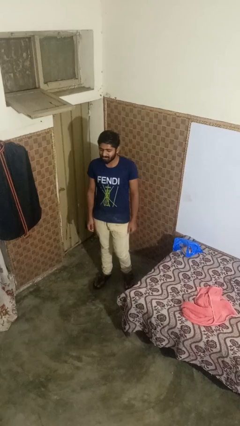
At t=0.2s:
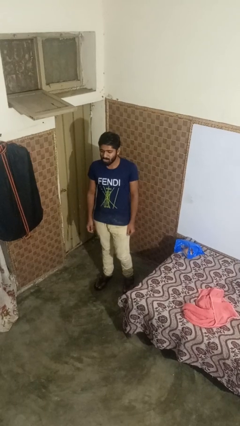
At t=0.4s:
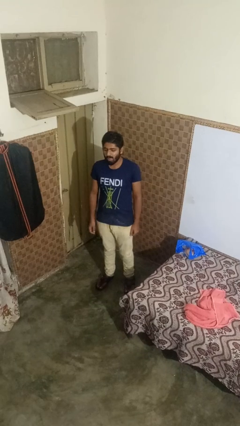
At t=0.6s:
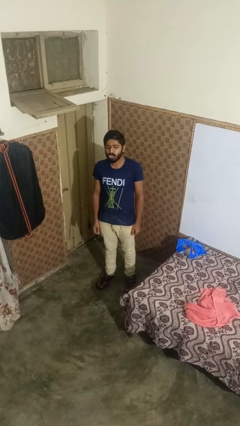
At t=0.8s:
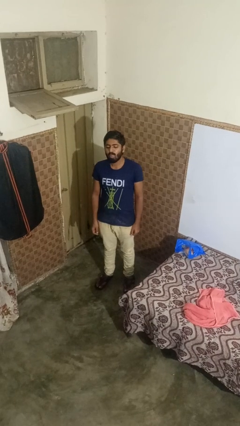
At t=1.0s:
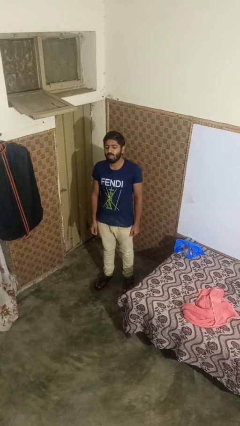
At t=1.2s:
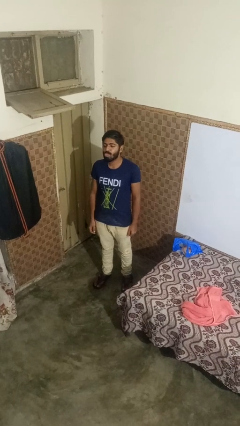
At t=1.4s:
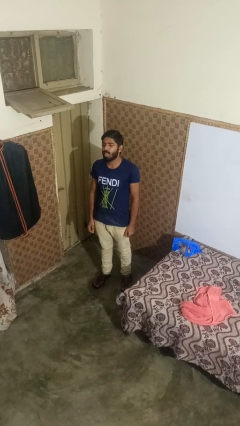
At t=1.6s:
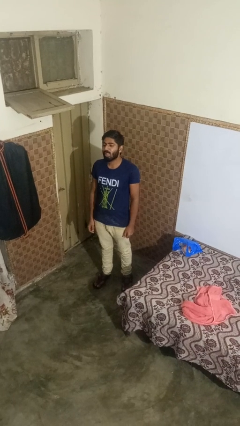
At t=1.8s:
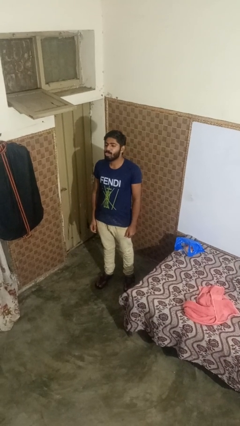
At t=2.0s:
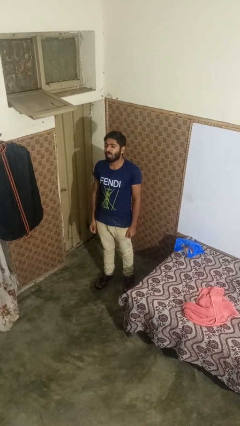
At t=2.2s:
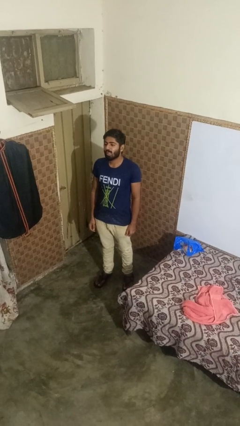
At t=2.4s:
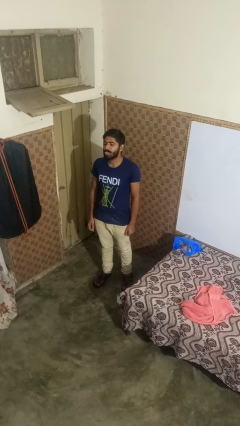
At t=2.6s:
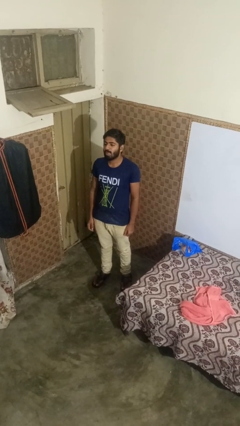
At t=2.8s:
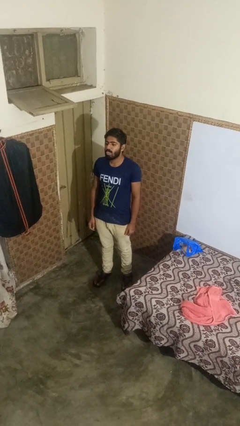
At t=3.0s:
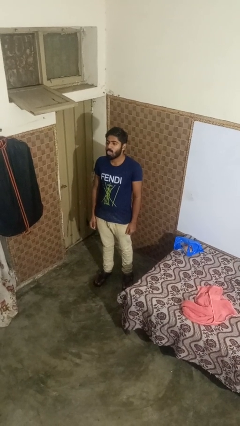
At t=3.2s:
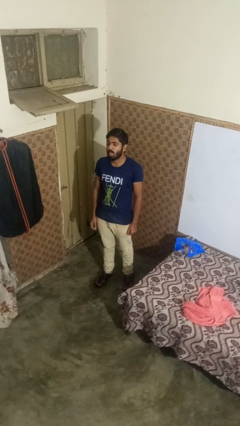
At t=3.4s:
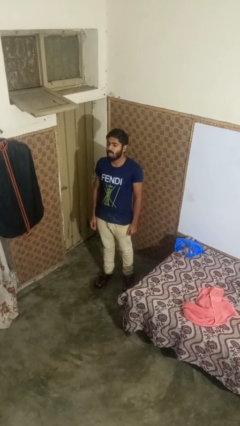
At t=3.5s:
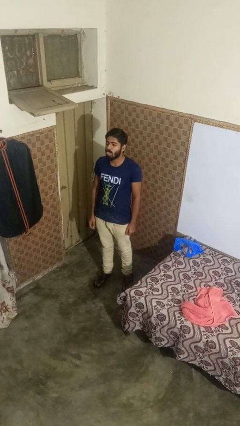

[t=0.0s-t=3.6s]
person sticks out tongue

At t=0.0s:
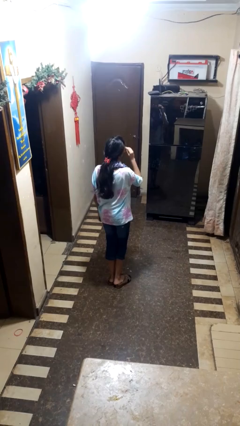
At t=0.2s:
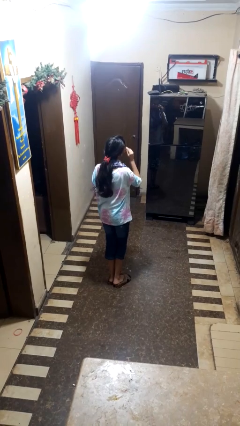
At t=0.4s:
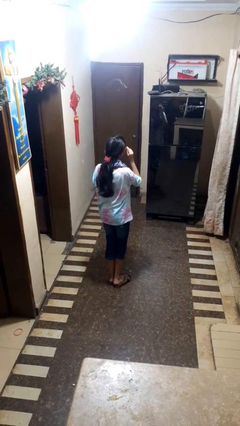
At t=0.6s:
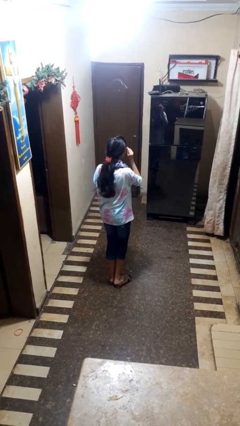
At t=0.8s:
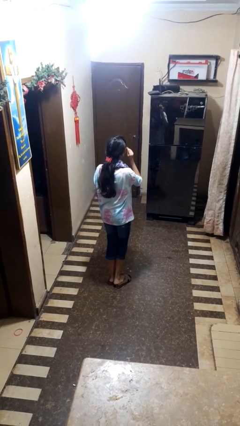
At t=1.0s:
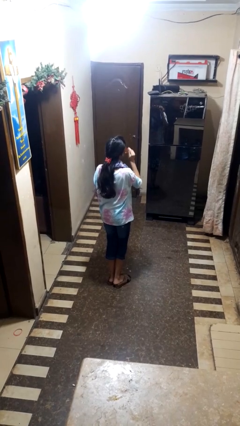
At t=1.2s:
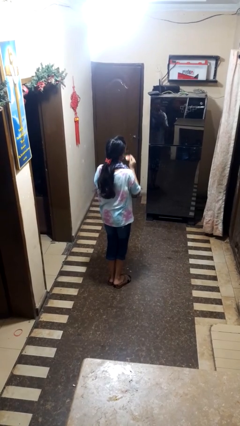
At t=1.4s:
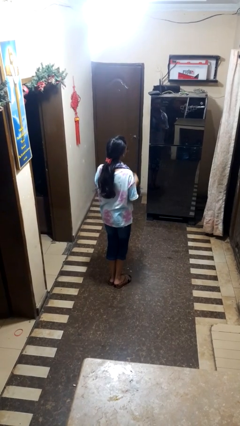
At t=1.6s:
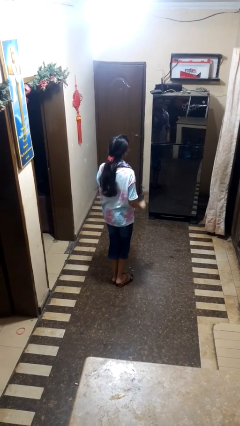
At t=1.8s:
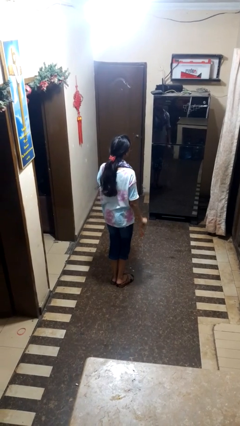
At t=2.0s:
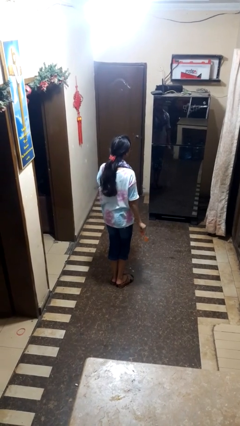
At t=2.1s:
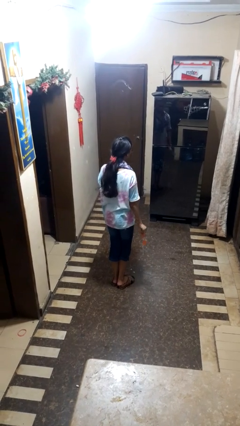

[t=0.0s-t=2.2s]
person takes off sunglasses

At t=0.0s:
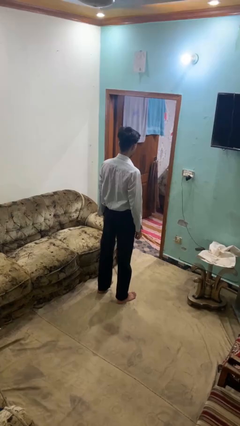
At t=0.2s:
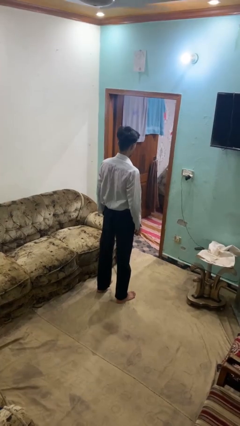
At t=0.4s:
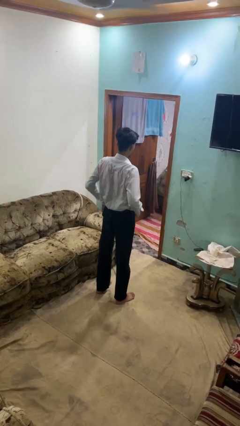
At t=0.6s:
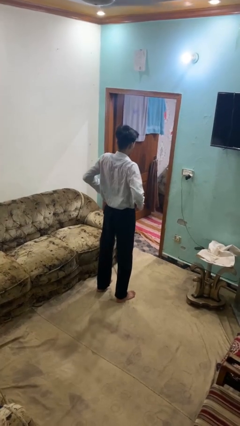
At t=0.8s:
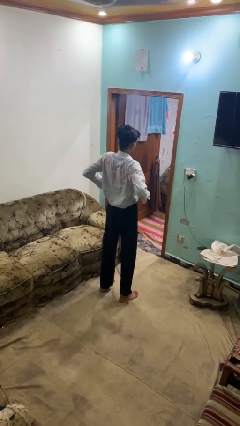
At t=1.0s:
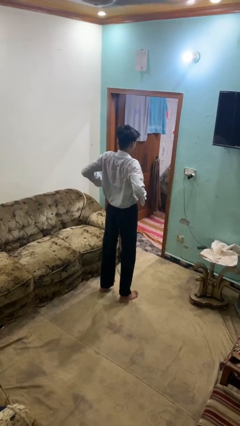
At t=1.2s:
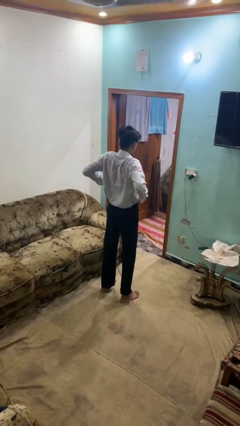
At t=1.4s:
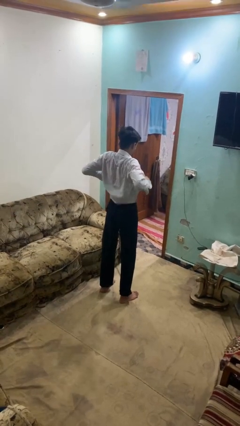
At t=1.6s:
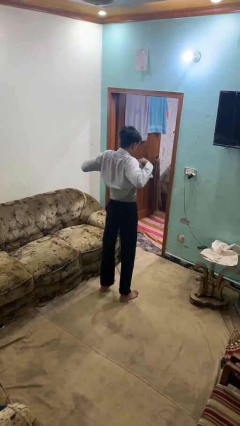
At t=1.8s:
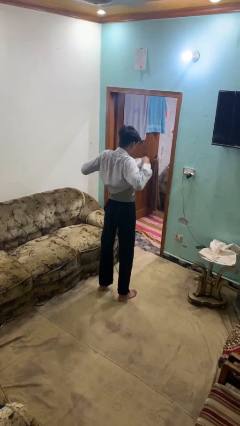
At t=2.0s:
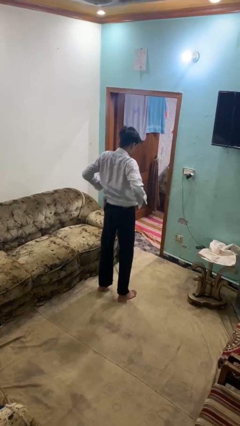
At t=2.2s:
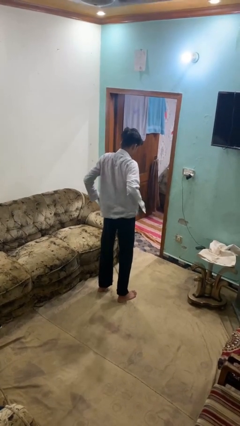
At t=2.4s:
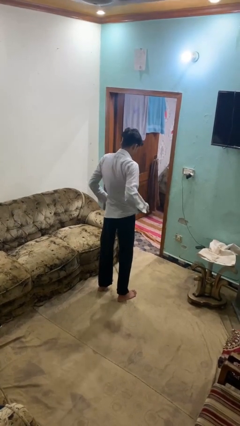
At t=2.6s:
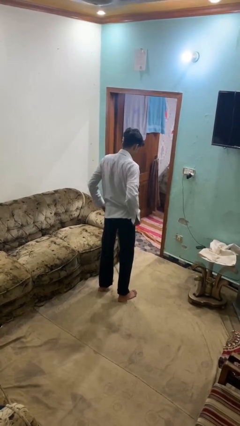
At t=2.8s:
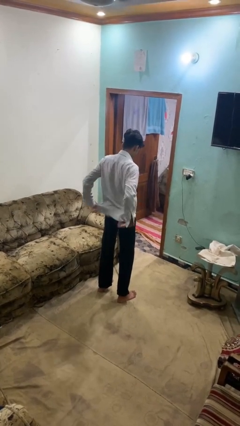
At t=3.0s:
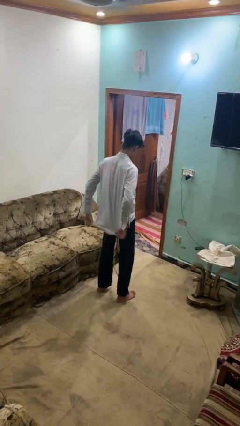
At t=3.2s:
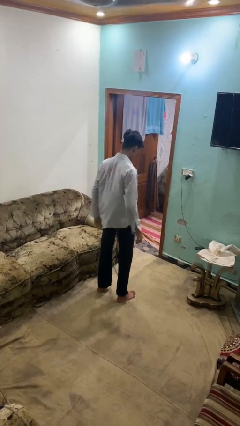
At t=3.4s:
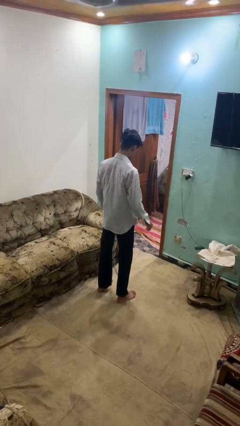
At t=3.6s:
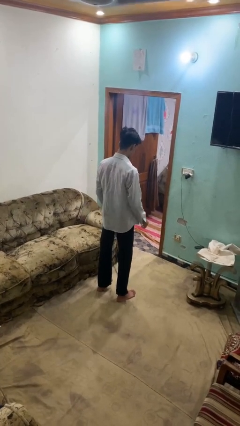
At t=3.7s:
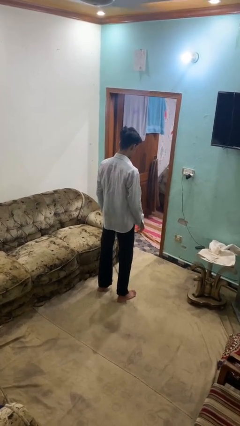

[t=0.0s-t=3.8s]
person untucks shirt

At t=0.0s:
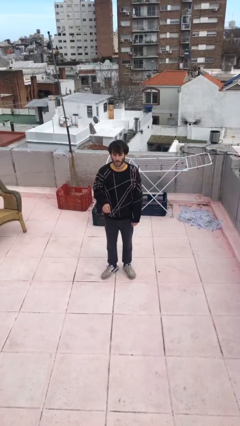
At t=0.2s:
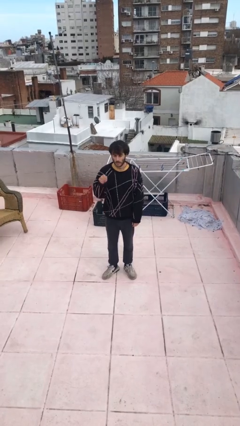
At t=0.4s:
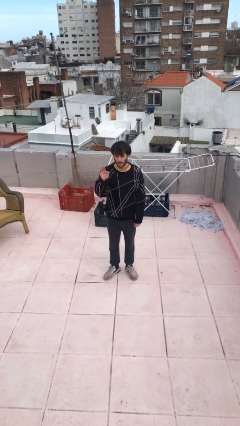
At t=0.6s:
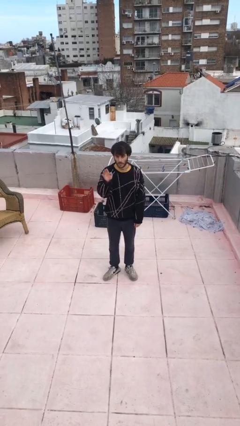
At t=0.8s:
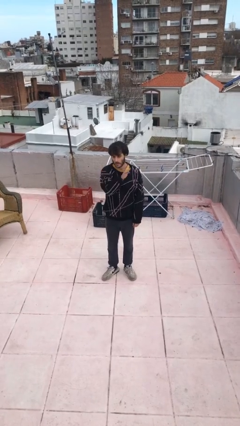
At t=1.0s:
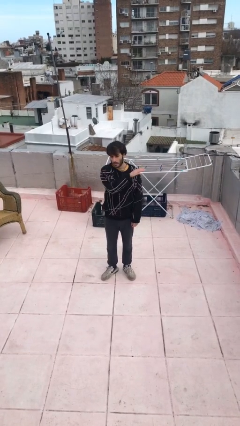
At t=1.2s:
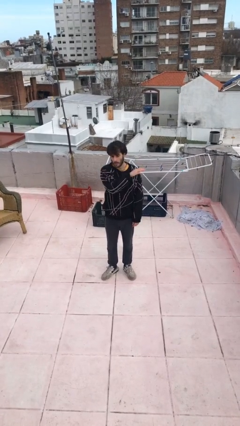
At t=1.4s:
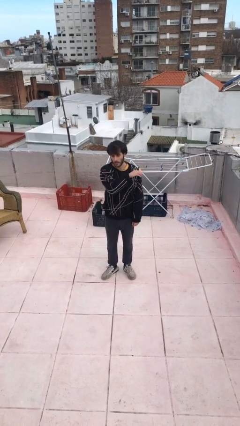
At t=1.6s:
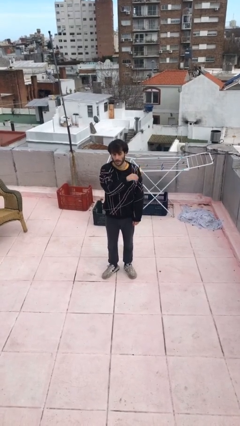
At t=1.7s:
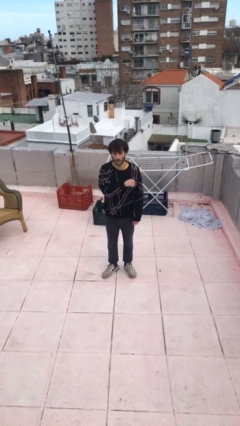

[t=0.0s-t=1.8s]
person gestures swipe left

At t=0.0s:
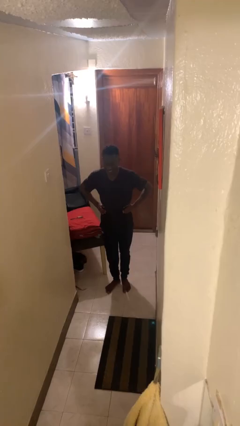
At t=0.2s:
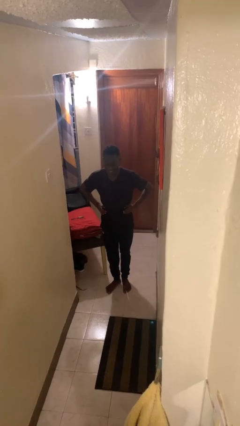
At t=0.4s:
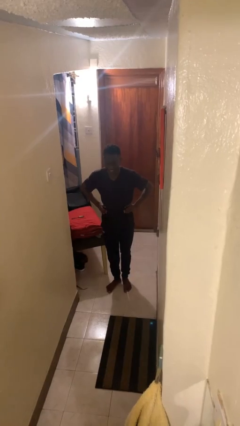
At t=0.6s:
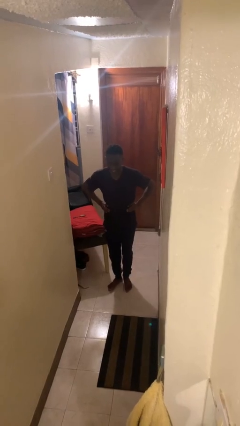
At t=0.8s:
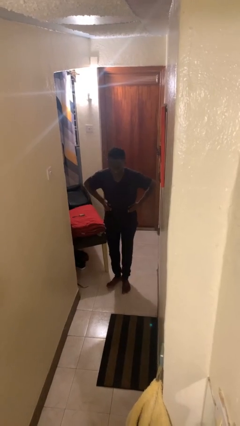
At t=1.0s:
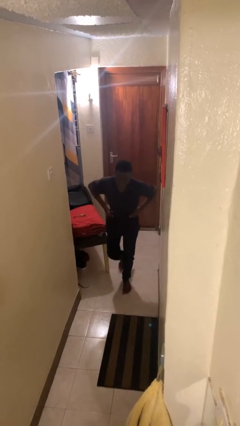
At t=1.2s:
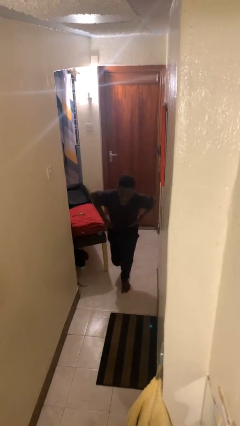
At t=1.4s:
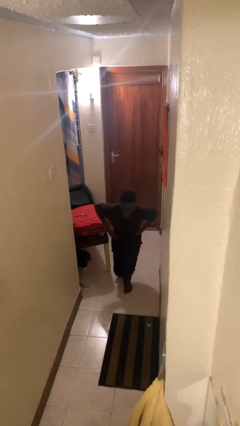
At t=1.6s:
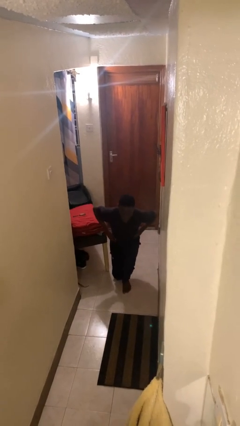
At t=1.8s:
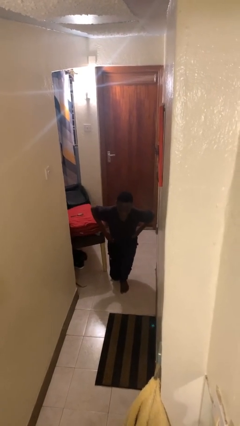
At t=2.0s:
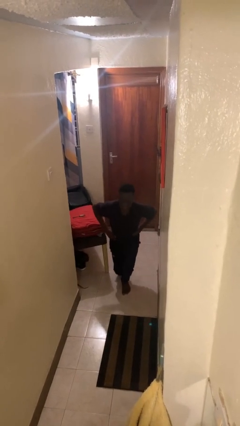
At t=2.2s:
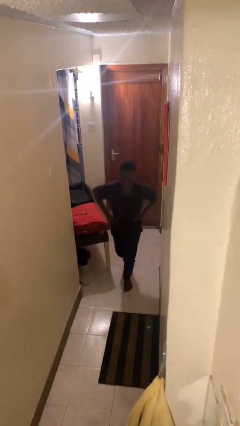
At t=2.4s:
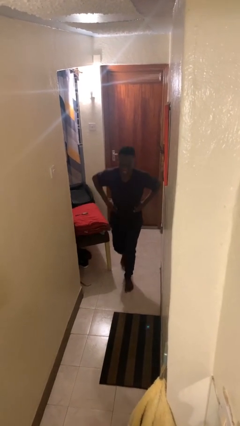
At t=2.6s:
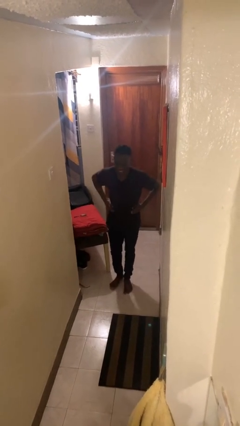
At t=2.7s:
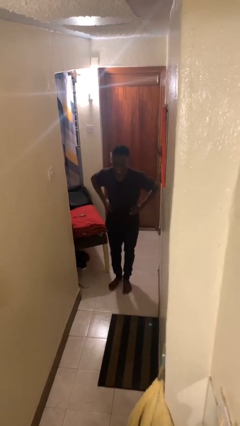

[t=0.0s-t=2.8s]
person exercises with lunges

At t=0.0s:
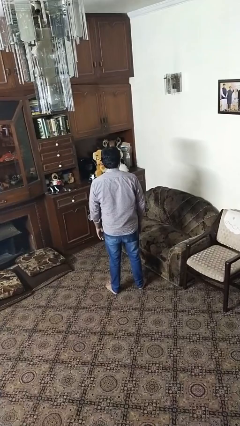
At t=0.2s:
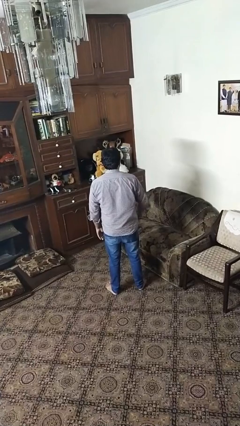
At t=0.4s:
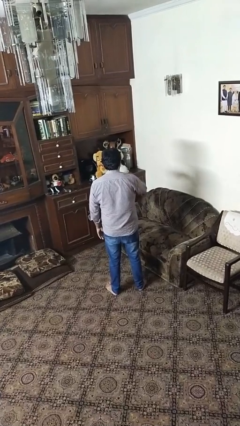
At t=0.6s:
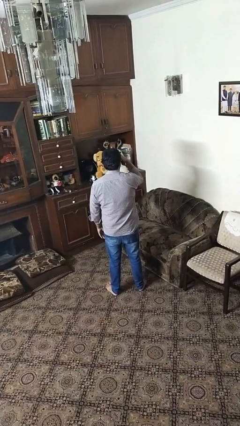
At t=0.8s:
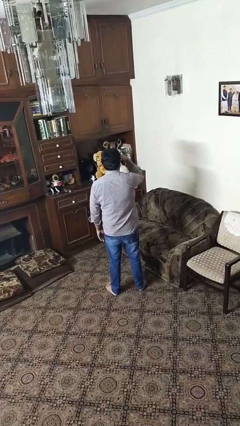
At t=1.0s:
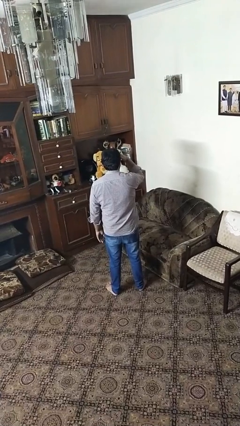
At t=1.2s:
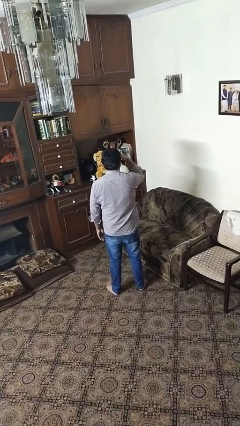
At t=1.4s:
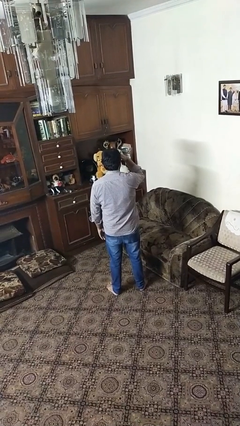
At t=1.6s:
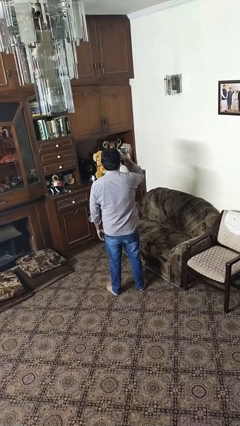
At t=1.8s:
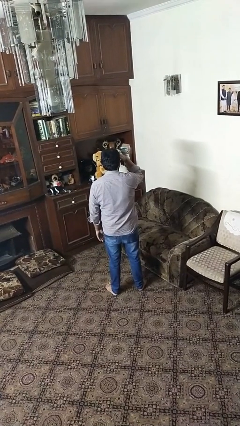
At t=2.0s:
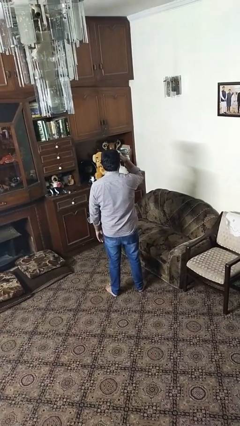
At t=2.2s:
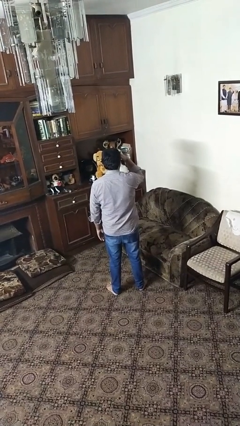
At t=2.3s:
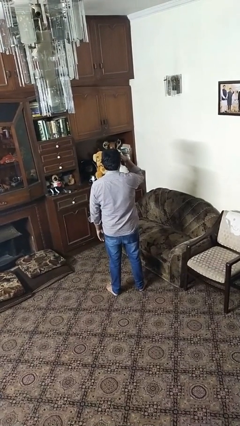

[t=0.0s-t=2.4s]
person salutes

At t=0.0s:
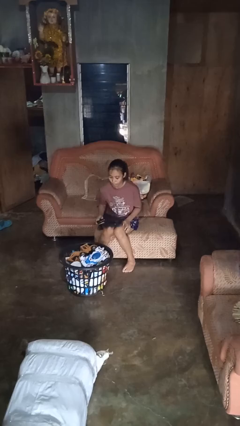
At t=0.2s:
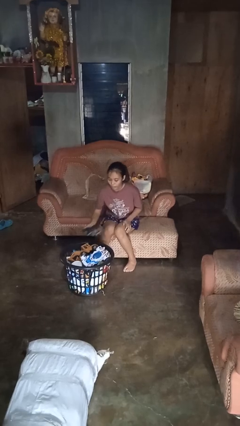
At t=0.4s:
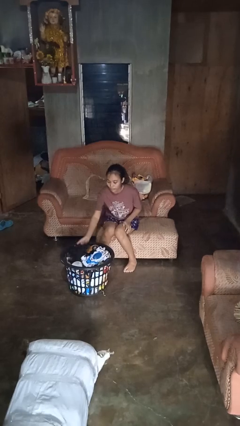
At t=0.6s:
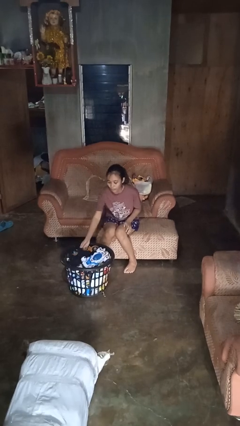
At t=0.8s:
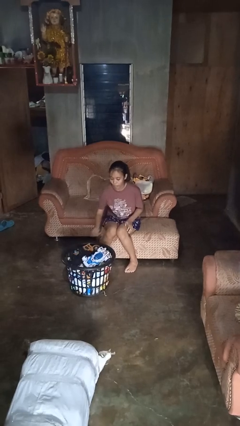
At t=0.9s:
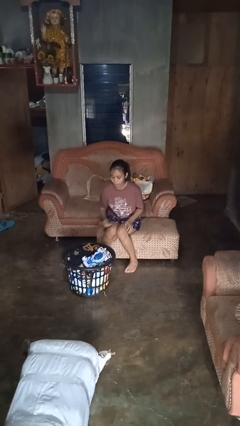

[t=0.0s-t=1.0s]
person puts object into basket
